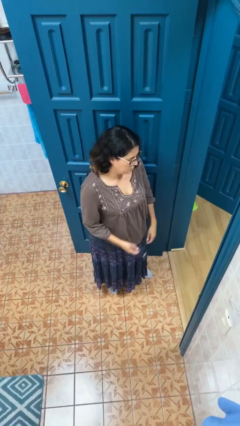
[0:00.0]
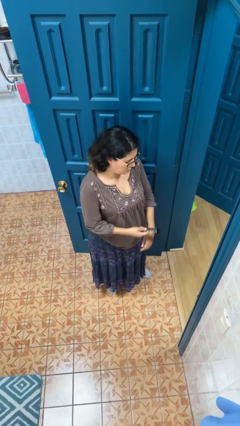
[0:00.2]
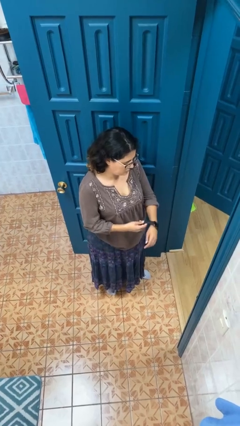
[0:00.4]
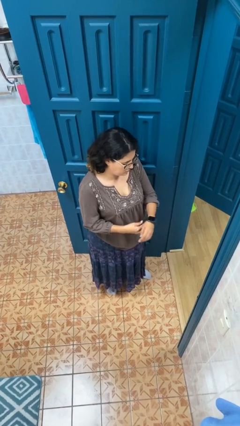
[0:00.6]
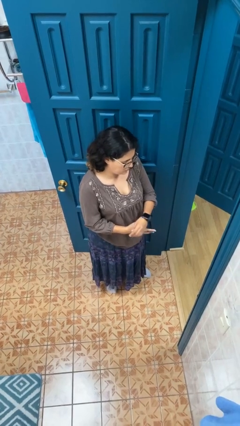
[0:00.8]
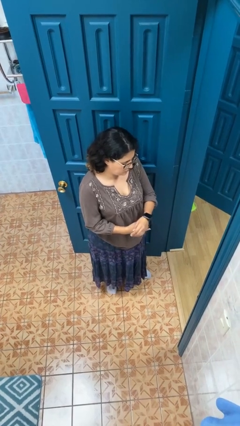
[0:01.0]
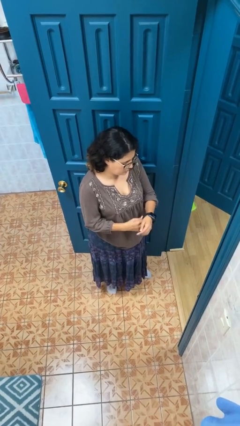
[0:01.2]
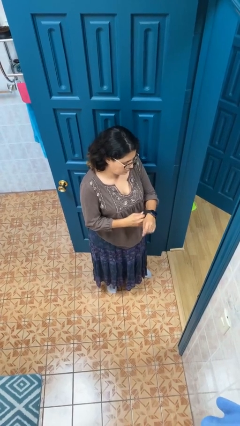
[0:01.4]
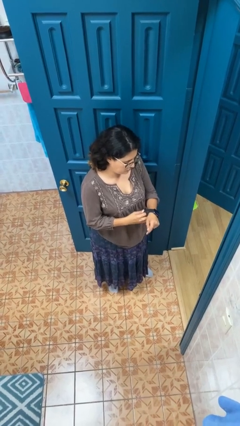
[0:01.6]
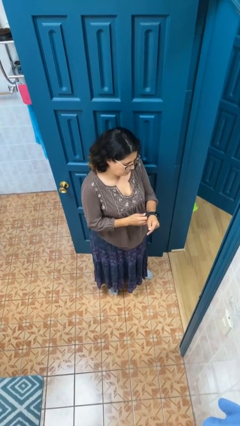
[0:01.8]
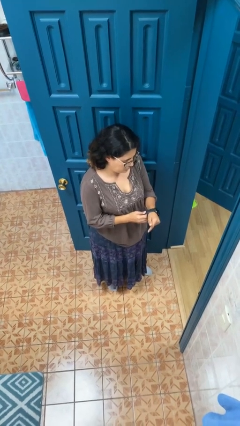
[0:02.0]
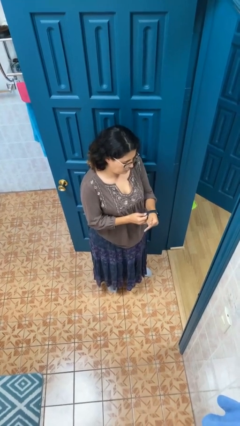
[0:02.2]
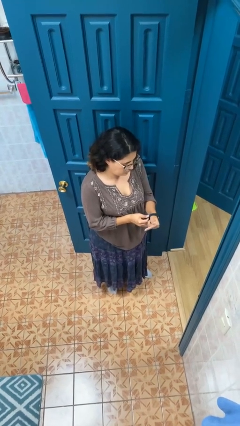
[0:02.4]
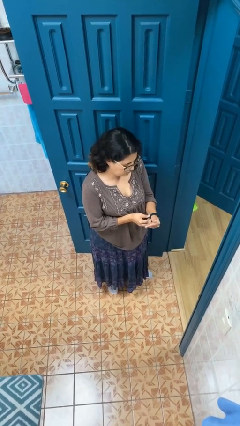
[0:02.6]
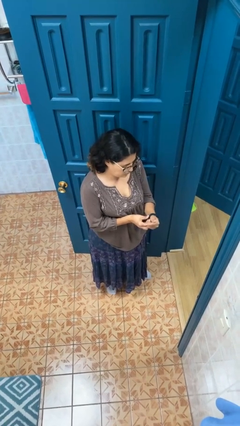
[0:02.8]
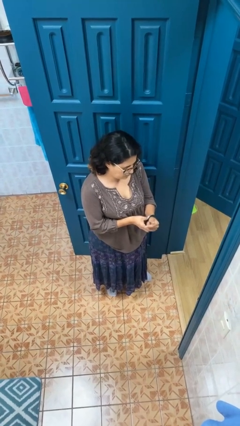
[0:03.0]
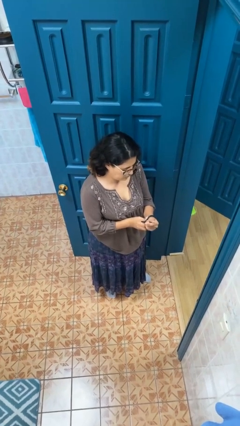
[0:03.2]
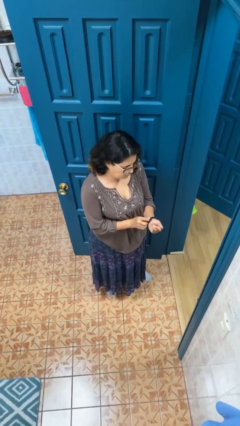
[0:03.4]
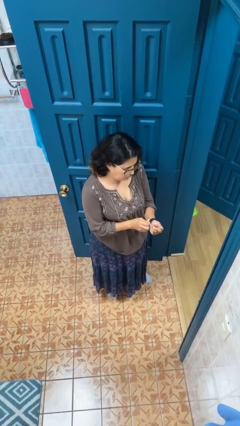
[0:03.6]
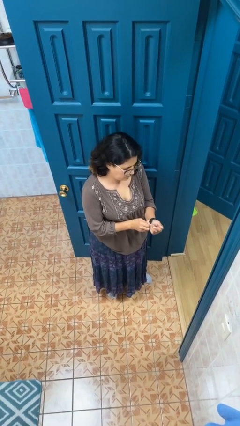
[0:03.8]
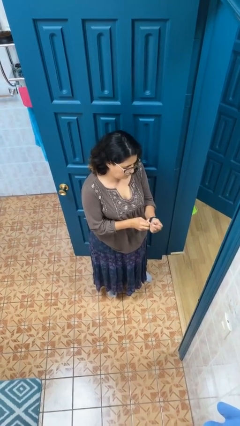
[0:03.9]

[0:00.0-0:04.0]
person puts on wristwatch

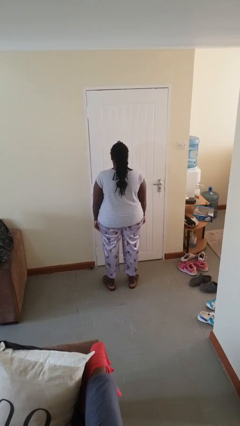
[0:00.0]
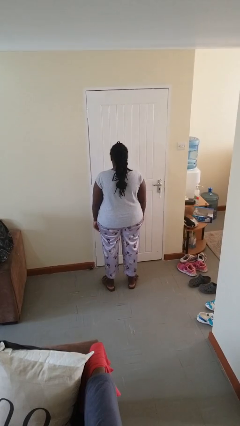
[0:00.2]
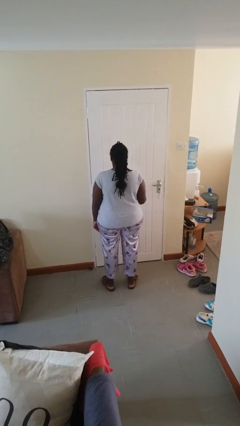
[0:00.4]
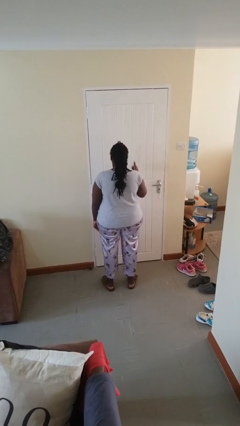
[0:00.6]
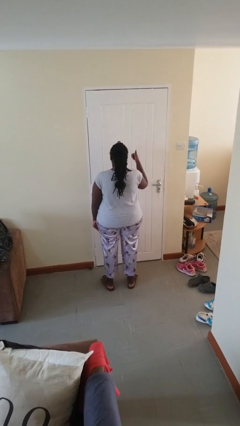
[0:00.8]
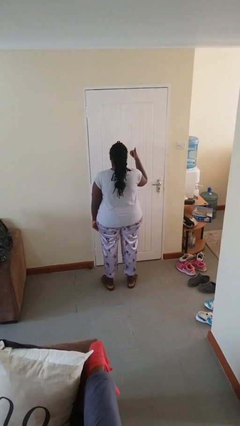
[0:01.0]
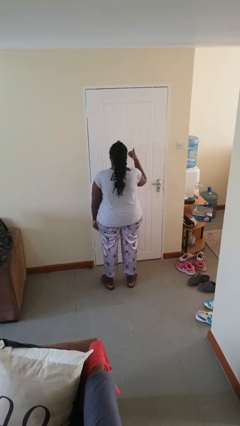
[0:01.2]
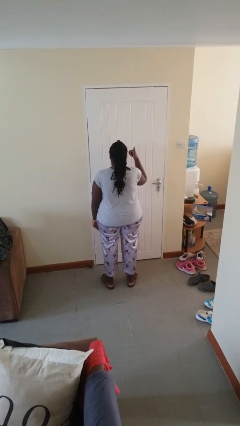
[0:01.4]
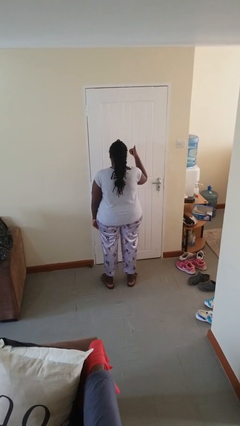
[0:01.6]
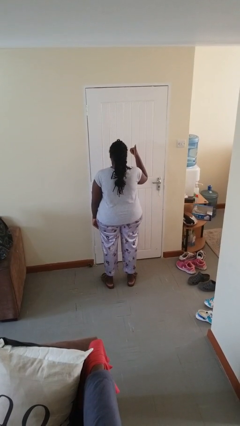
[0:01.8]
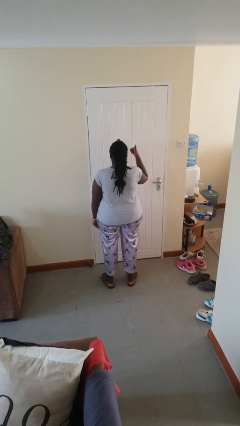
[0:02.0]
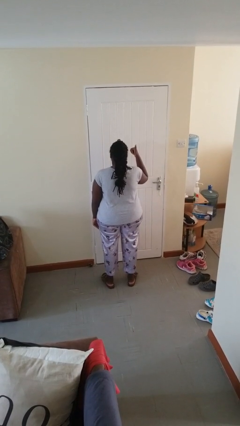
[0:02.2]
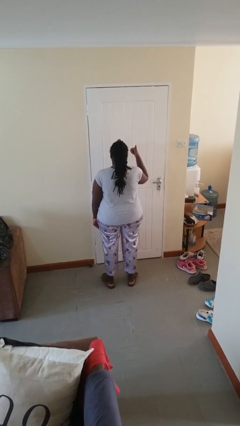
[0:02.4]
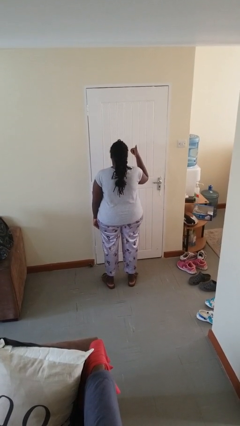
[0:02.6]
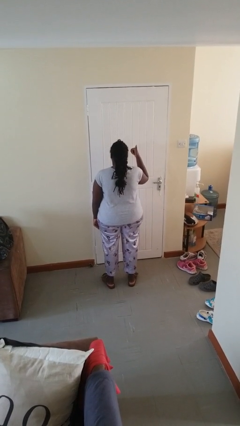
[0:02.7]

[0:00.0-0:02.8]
person gestures thumbs up

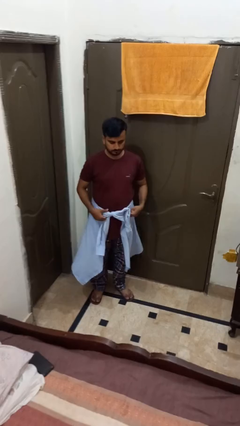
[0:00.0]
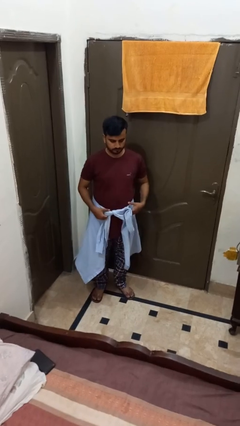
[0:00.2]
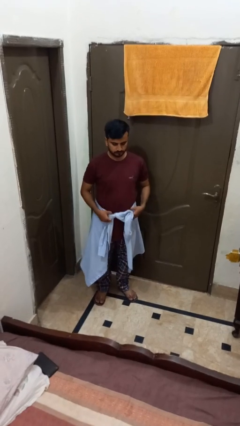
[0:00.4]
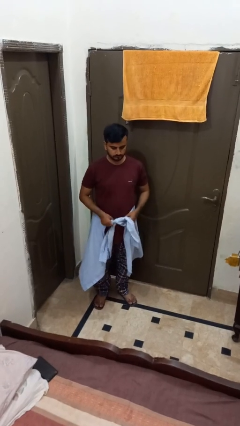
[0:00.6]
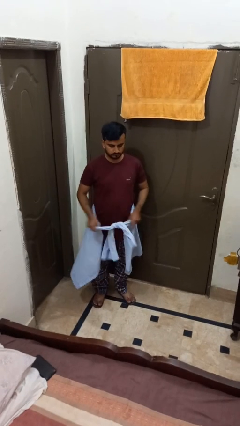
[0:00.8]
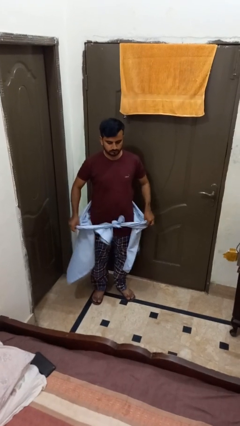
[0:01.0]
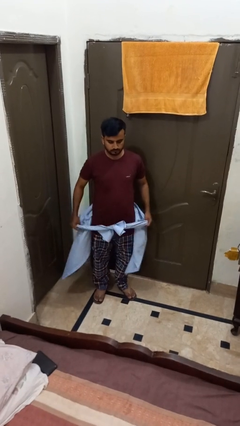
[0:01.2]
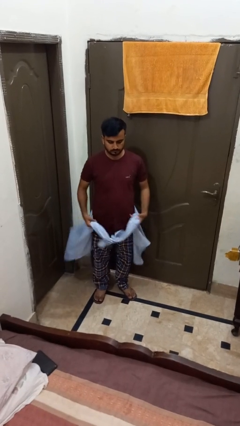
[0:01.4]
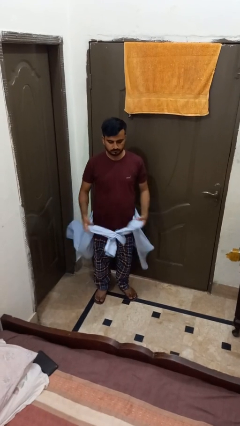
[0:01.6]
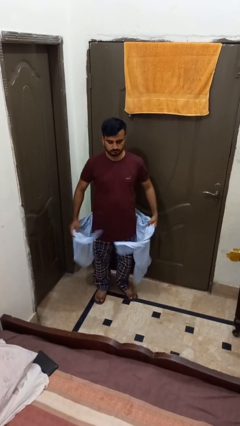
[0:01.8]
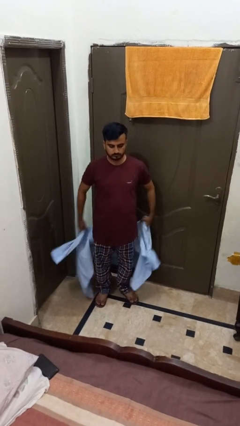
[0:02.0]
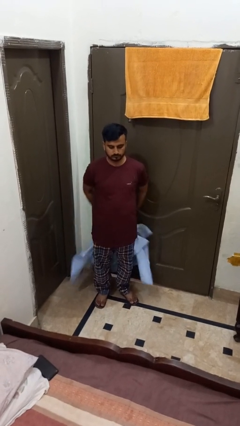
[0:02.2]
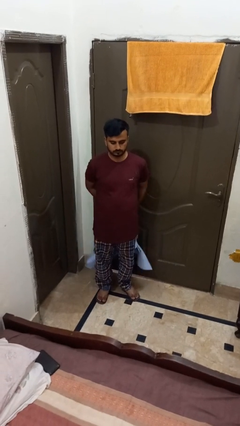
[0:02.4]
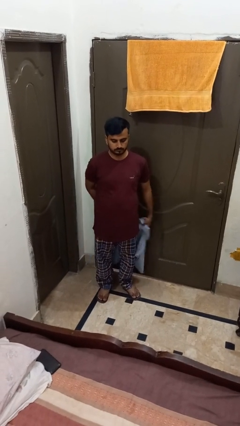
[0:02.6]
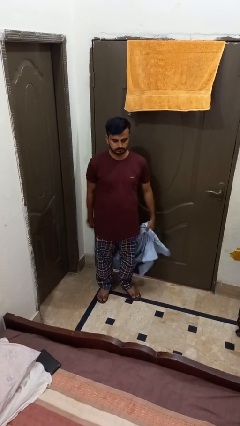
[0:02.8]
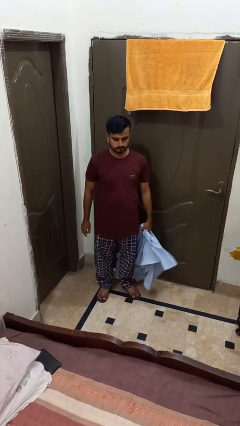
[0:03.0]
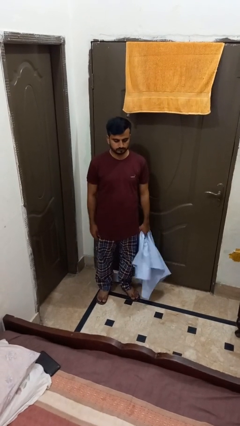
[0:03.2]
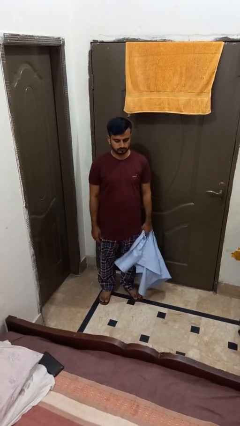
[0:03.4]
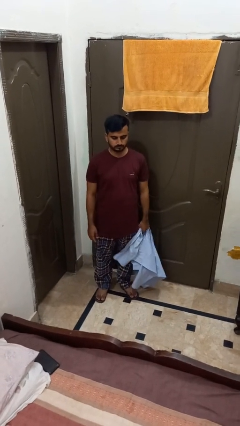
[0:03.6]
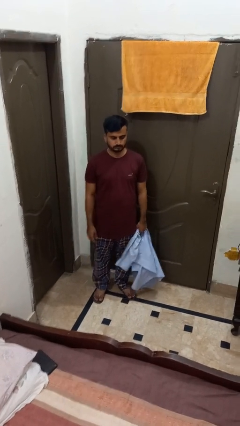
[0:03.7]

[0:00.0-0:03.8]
person unties jacket around waist

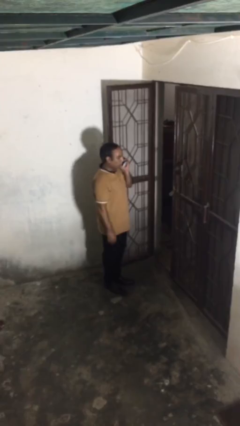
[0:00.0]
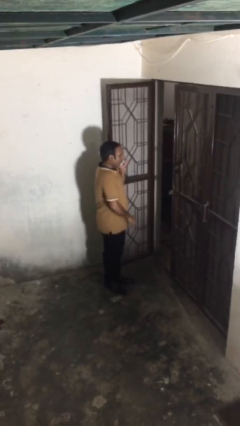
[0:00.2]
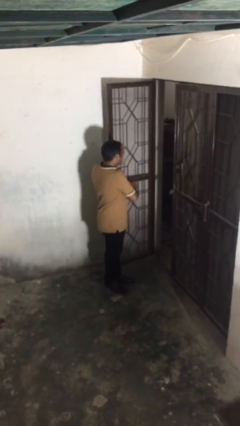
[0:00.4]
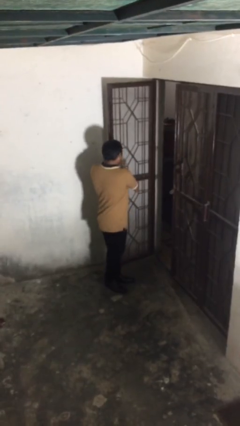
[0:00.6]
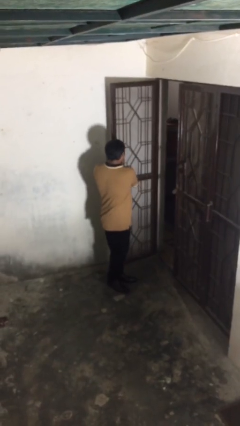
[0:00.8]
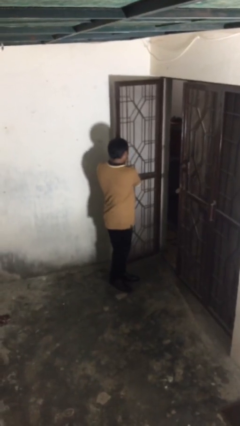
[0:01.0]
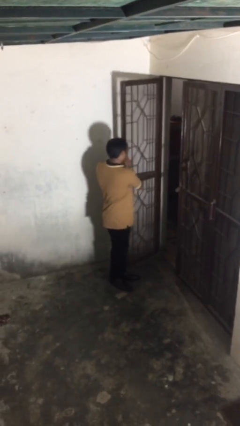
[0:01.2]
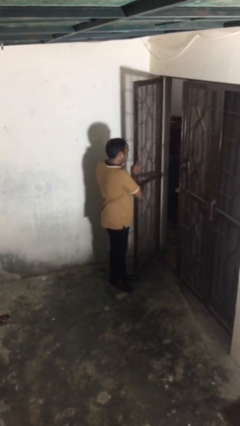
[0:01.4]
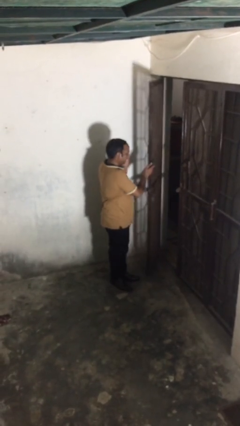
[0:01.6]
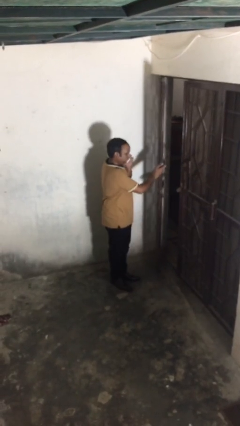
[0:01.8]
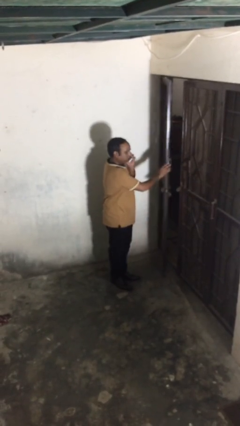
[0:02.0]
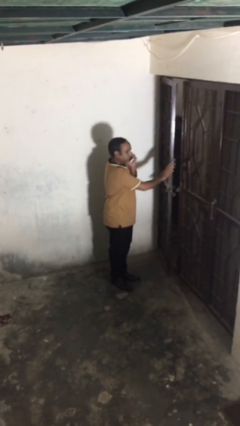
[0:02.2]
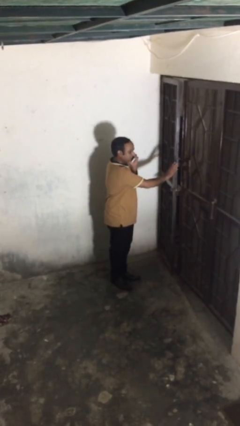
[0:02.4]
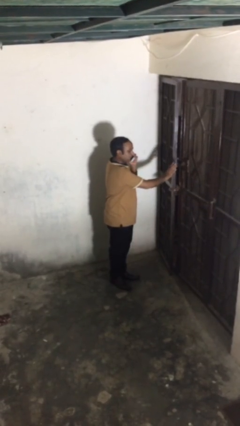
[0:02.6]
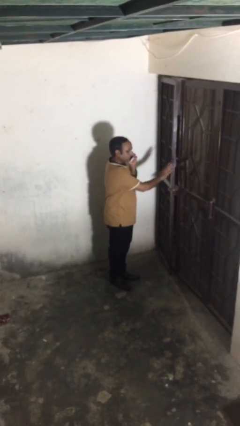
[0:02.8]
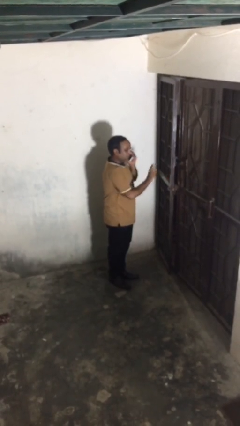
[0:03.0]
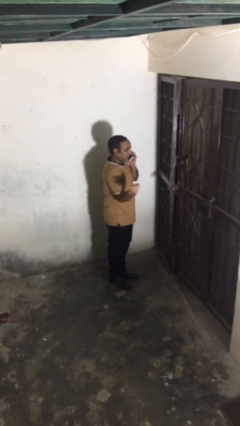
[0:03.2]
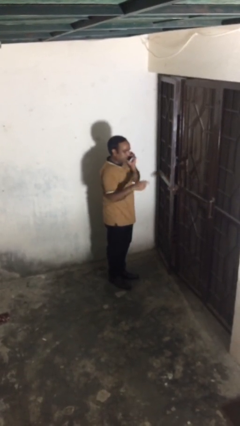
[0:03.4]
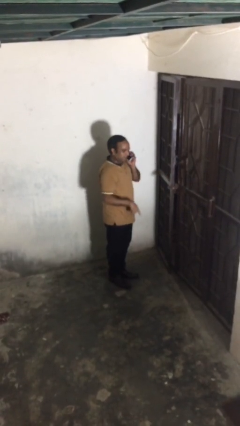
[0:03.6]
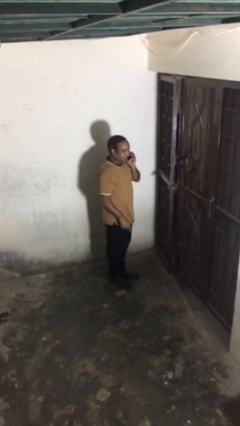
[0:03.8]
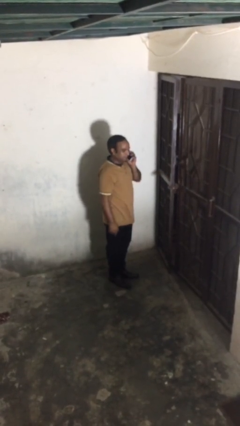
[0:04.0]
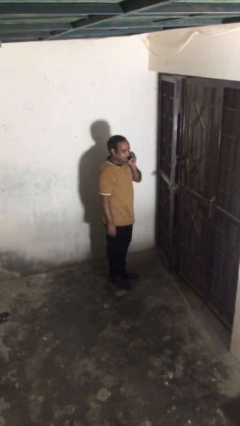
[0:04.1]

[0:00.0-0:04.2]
person closes facility door

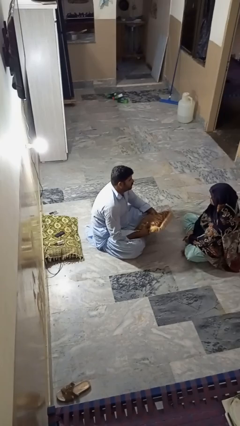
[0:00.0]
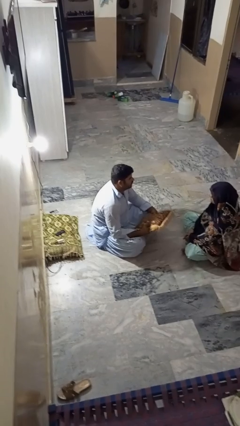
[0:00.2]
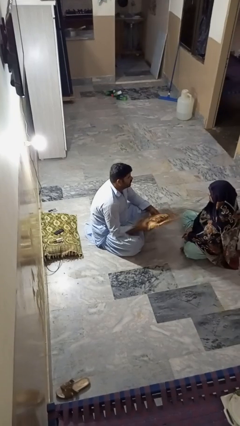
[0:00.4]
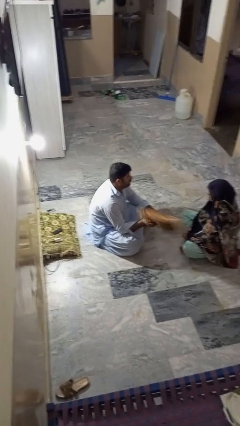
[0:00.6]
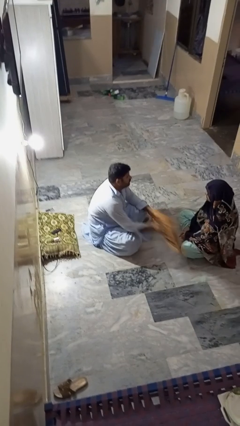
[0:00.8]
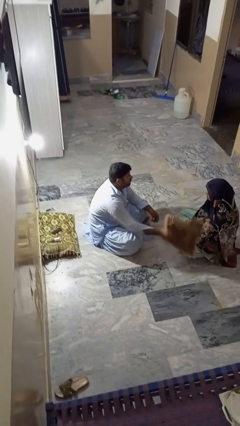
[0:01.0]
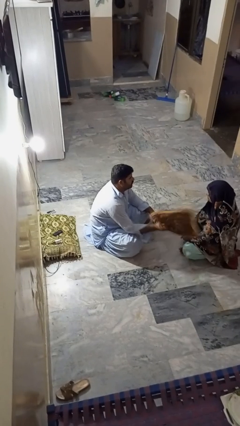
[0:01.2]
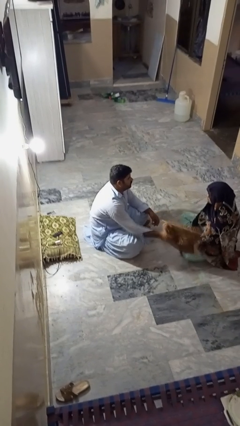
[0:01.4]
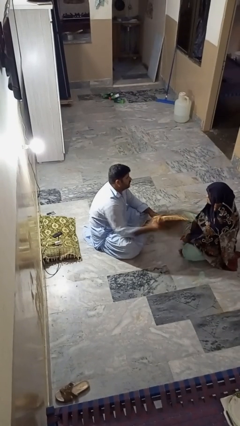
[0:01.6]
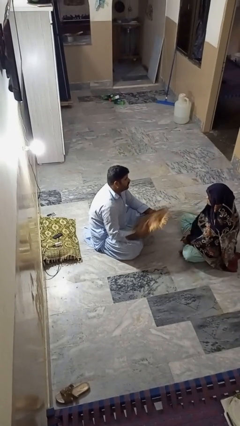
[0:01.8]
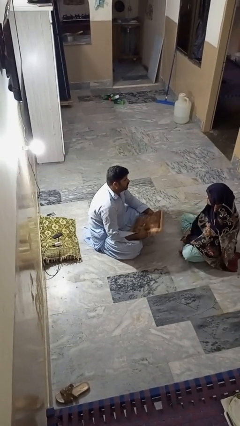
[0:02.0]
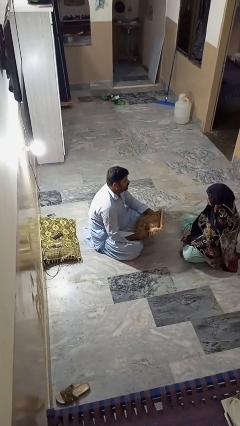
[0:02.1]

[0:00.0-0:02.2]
person hits person with pillow

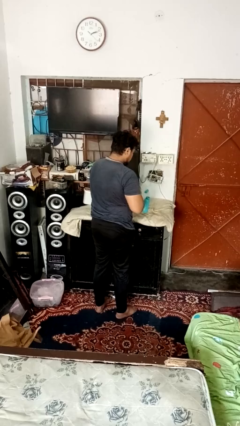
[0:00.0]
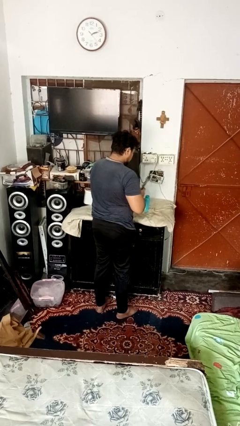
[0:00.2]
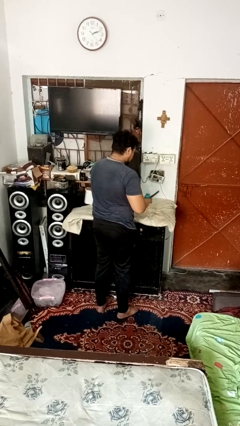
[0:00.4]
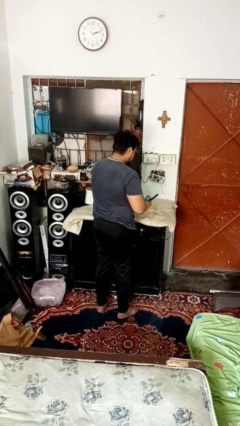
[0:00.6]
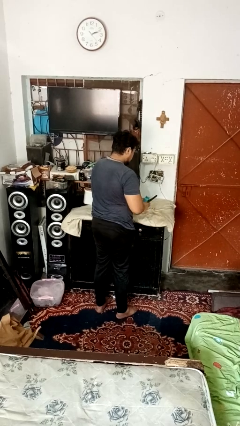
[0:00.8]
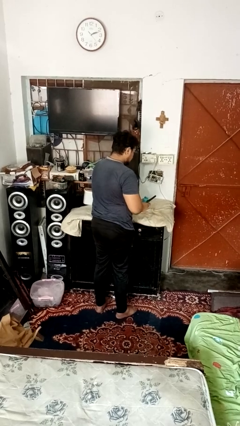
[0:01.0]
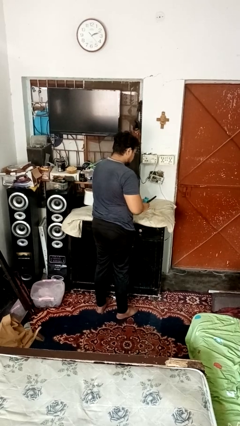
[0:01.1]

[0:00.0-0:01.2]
person opens can with can opener
